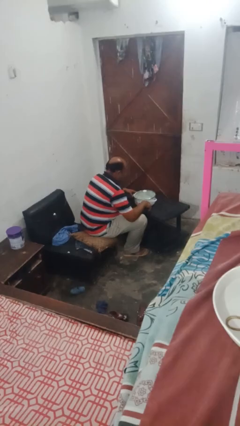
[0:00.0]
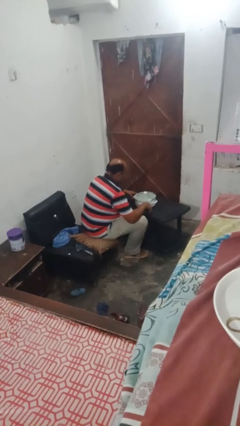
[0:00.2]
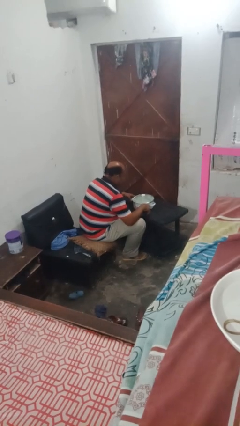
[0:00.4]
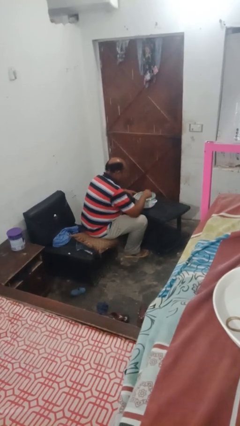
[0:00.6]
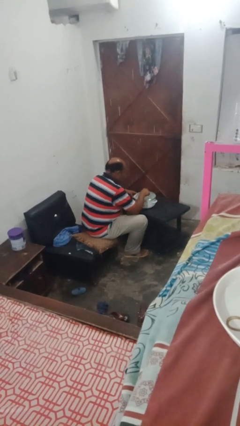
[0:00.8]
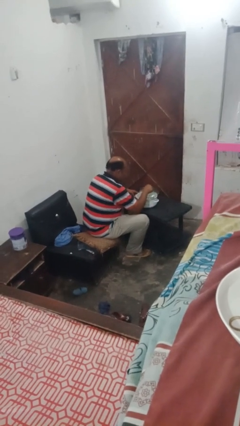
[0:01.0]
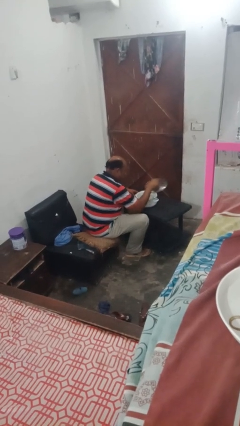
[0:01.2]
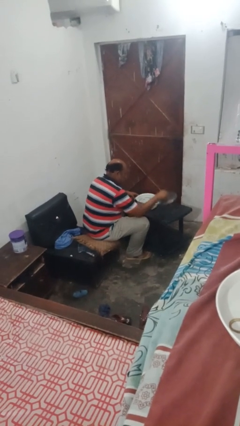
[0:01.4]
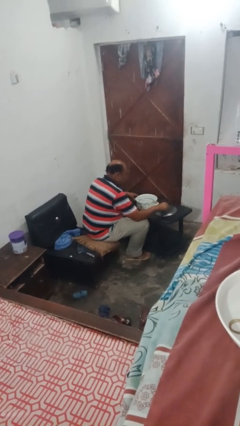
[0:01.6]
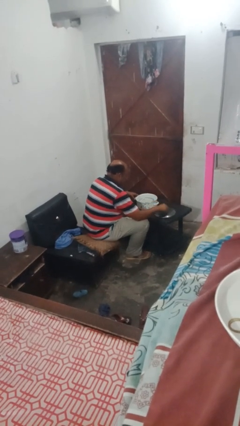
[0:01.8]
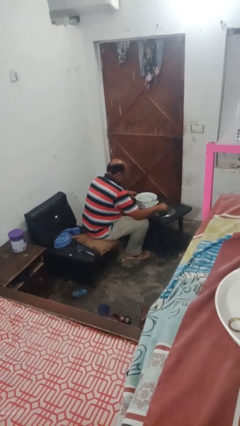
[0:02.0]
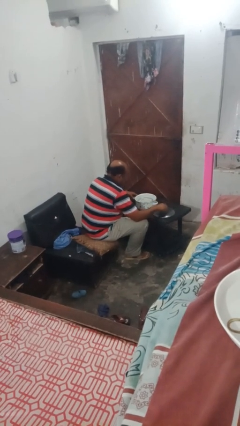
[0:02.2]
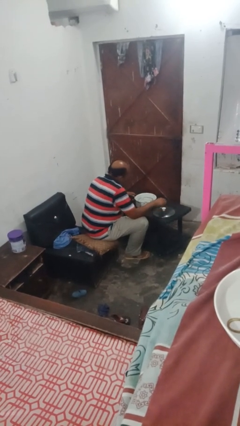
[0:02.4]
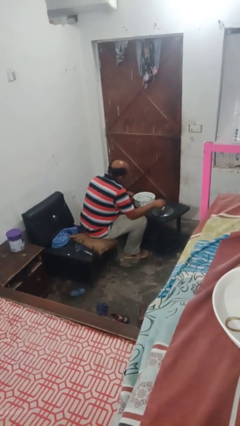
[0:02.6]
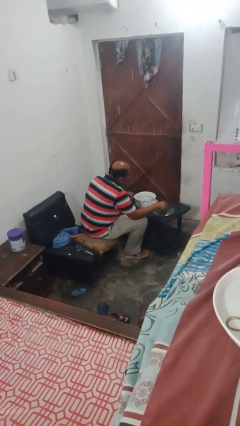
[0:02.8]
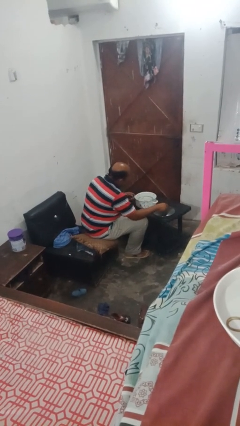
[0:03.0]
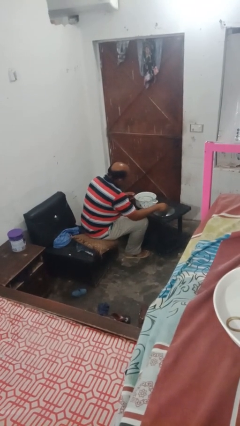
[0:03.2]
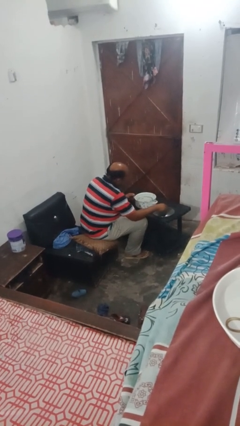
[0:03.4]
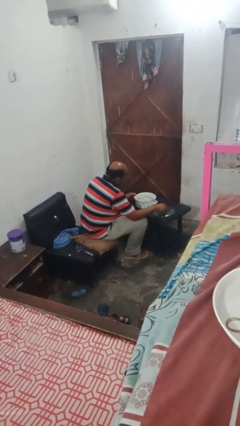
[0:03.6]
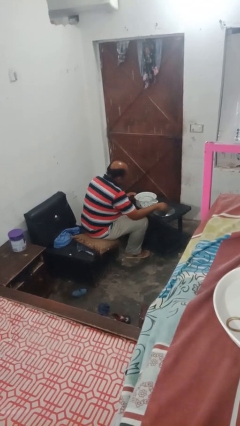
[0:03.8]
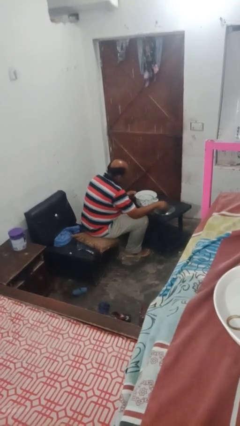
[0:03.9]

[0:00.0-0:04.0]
person opens jar

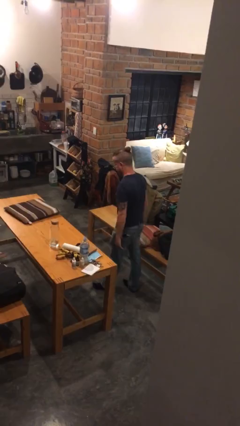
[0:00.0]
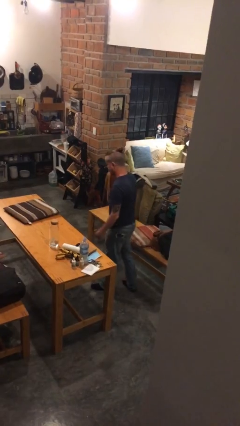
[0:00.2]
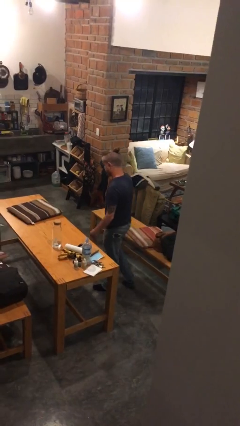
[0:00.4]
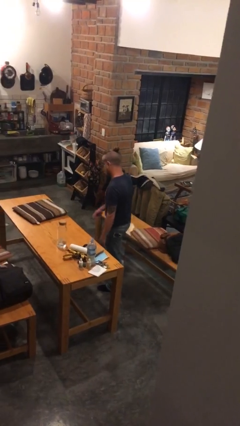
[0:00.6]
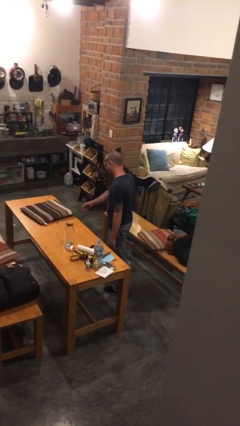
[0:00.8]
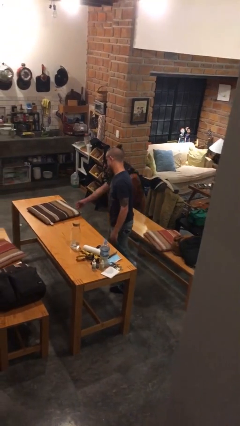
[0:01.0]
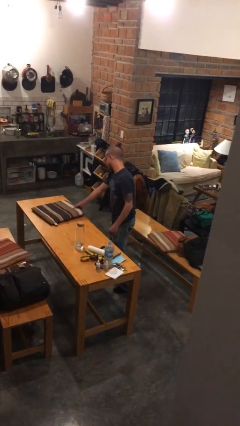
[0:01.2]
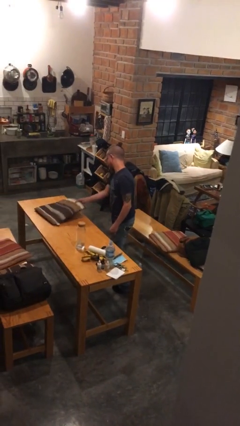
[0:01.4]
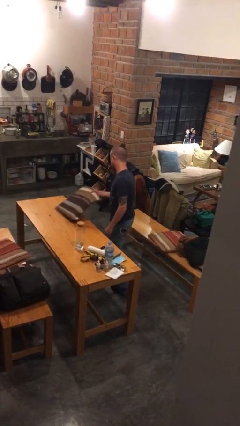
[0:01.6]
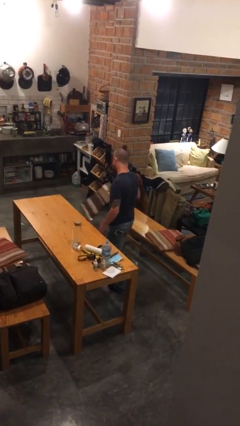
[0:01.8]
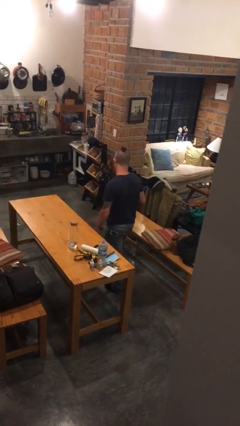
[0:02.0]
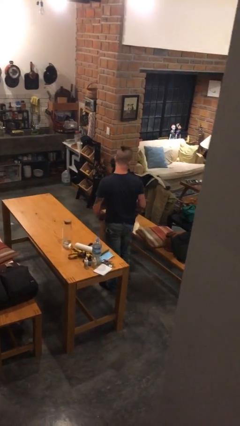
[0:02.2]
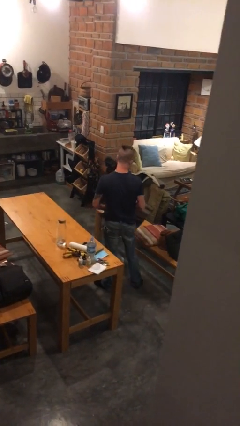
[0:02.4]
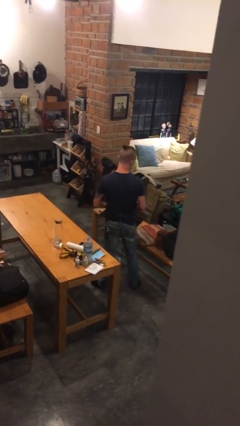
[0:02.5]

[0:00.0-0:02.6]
person picks up object from table

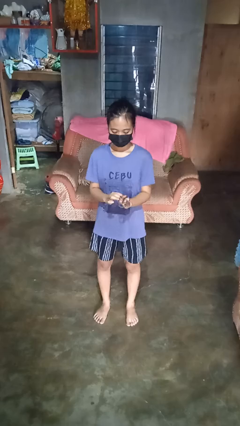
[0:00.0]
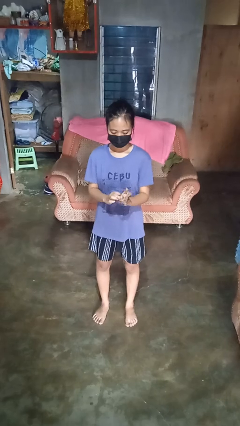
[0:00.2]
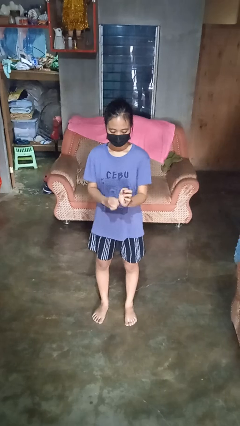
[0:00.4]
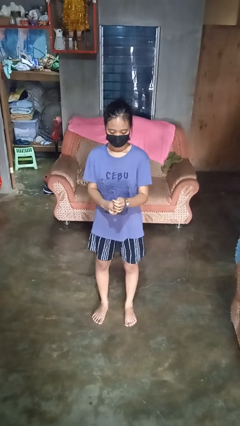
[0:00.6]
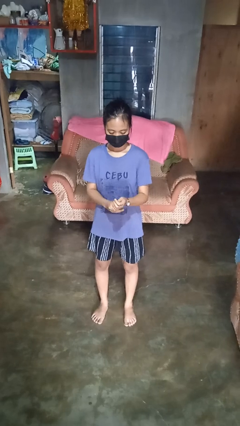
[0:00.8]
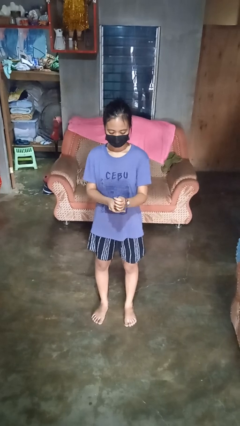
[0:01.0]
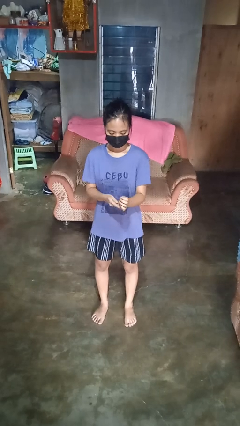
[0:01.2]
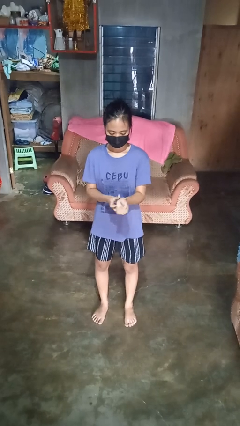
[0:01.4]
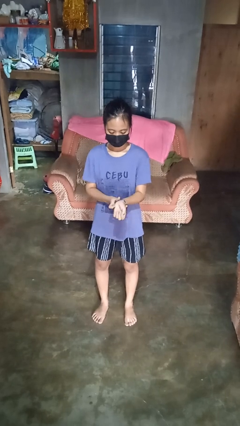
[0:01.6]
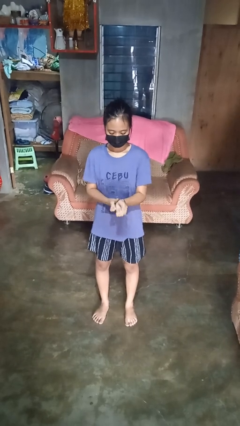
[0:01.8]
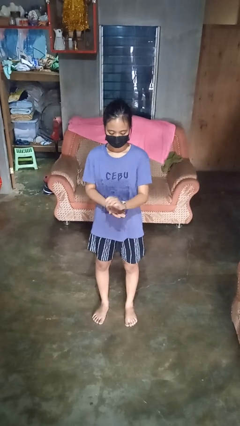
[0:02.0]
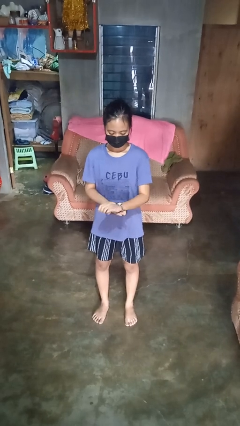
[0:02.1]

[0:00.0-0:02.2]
person puts on wristwatch

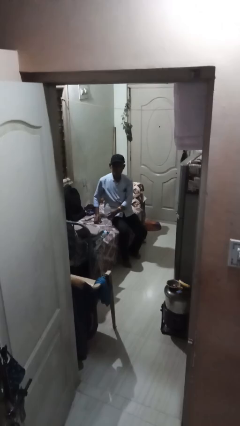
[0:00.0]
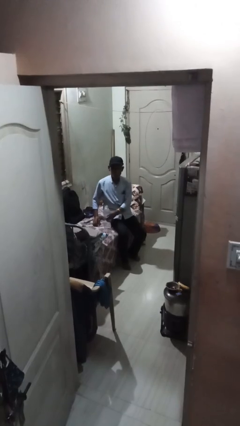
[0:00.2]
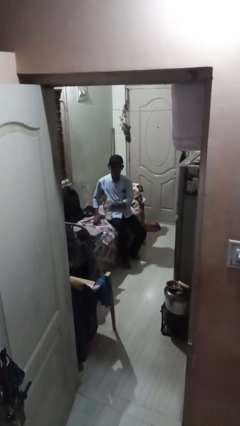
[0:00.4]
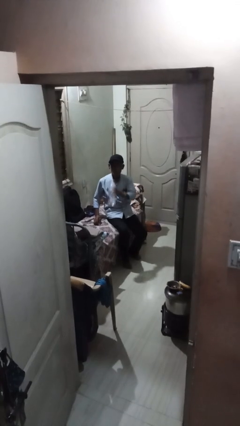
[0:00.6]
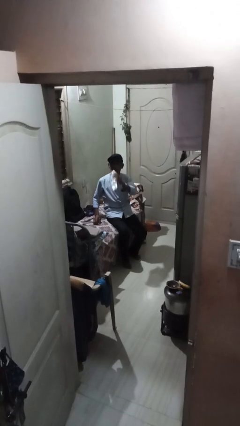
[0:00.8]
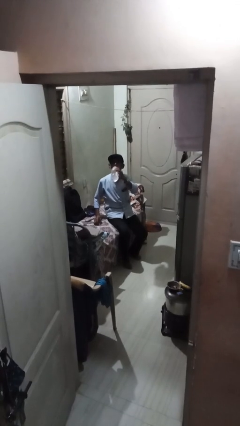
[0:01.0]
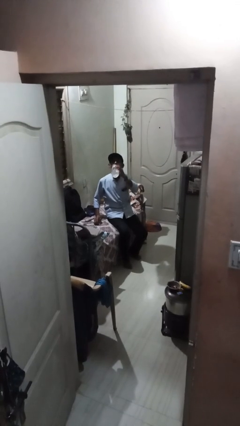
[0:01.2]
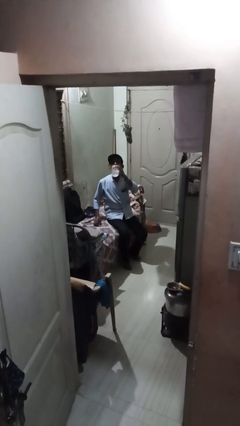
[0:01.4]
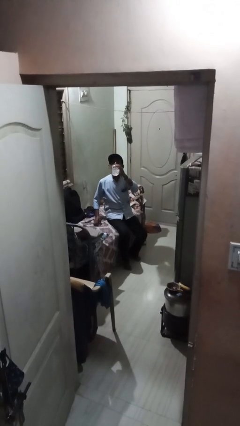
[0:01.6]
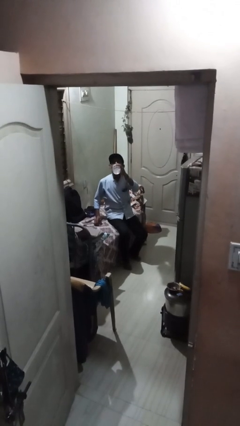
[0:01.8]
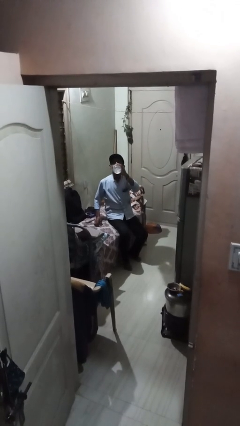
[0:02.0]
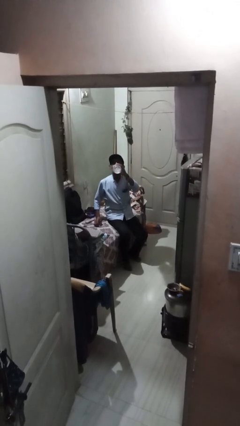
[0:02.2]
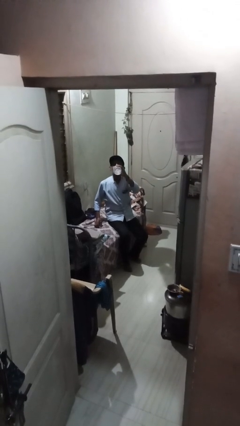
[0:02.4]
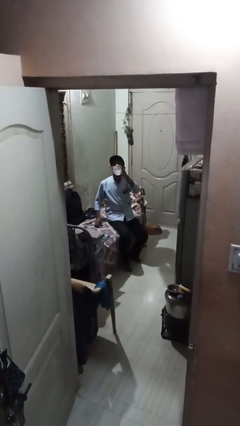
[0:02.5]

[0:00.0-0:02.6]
person drinks from bottle

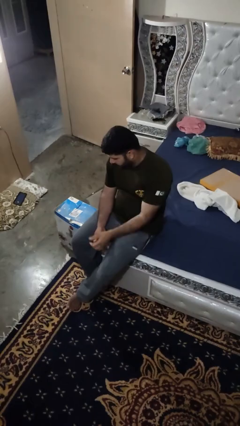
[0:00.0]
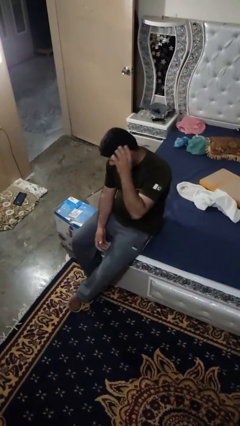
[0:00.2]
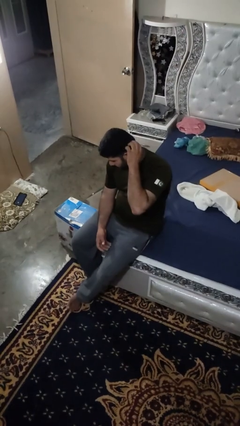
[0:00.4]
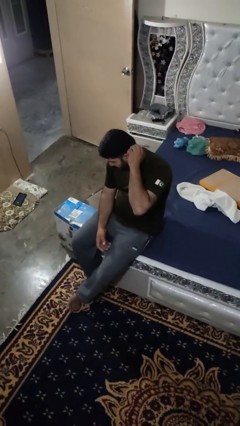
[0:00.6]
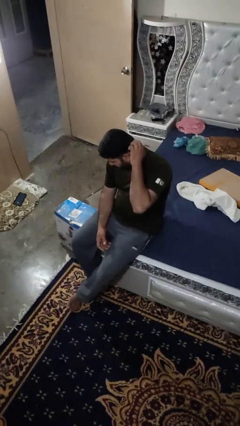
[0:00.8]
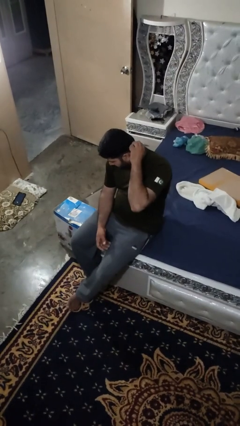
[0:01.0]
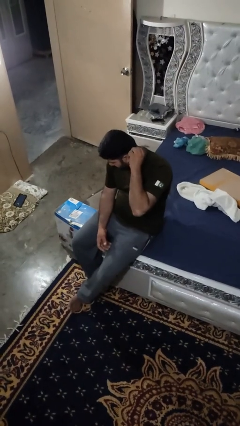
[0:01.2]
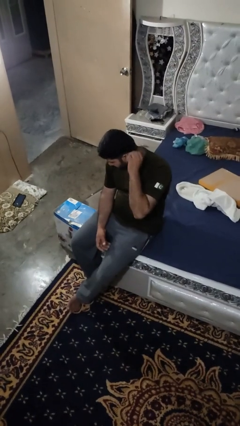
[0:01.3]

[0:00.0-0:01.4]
person strokes hair

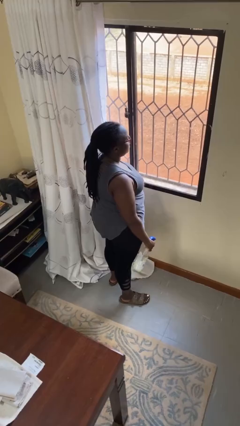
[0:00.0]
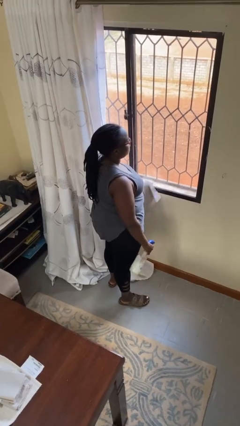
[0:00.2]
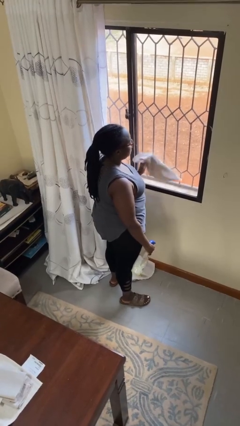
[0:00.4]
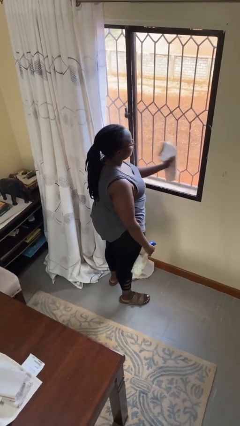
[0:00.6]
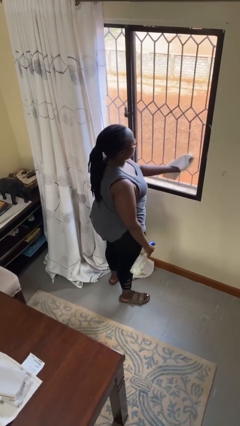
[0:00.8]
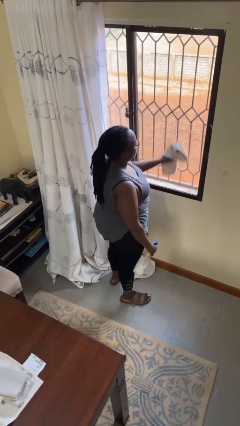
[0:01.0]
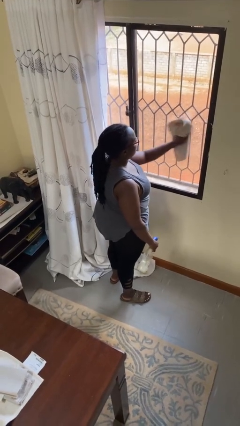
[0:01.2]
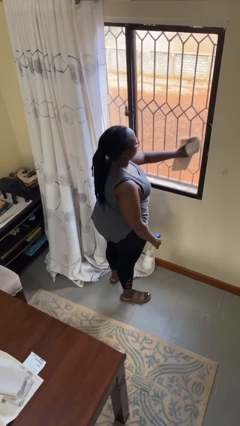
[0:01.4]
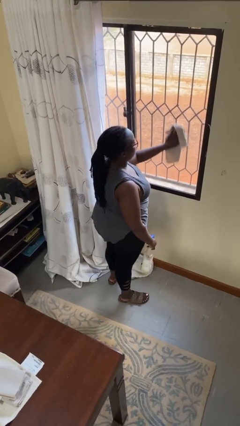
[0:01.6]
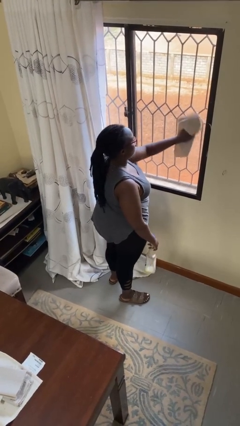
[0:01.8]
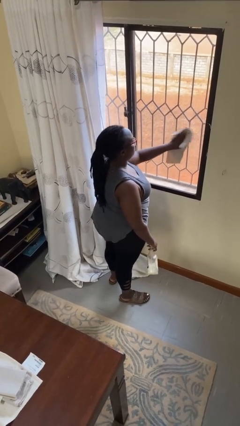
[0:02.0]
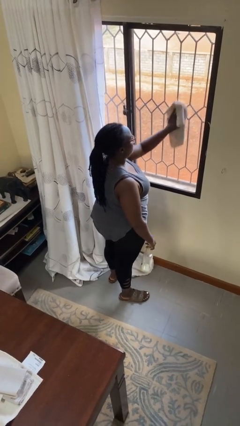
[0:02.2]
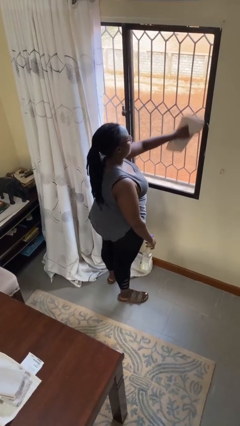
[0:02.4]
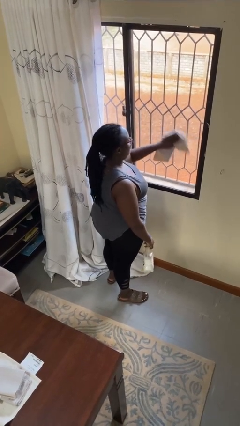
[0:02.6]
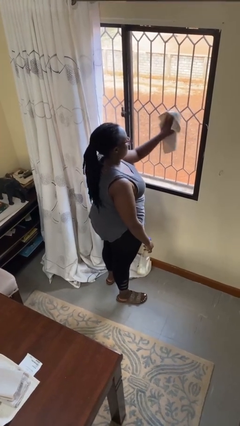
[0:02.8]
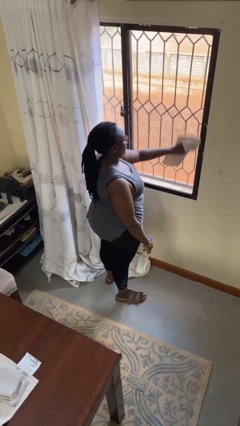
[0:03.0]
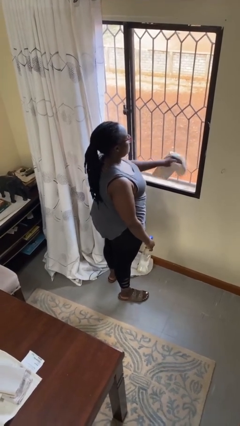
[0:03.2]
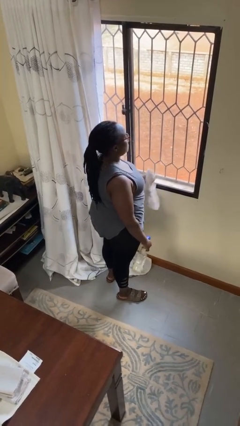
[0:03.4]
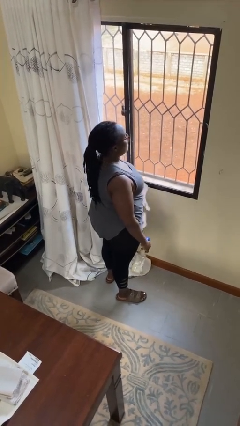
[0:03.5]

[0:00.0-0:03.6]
person washes window

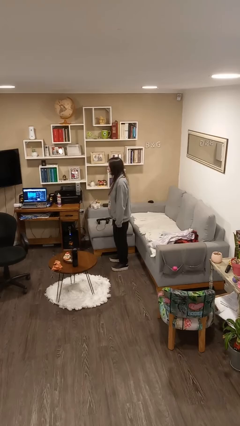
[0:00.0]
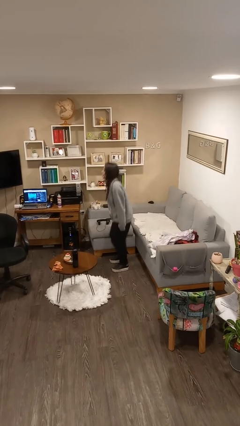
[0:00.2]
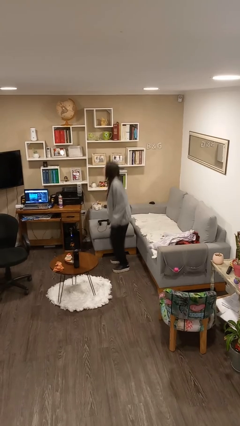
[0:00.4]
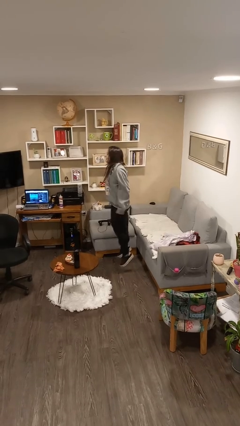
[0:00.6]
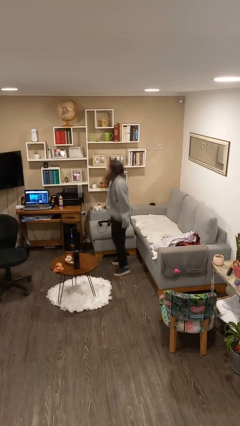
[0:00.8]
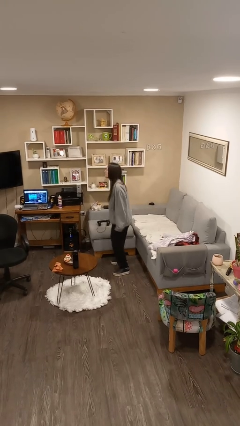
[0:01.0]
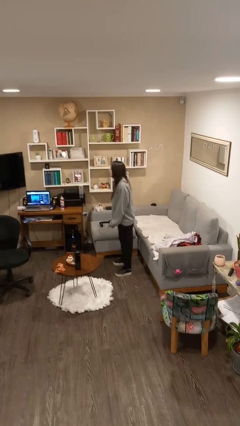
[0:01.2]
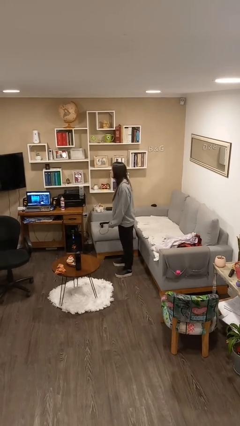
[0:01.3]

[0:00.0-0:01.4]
person jumps
